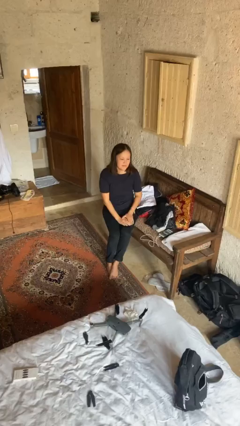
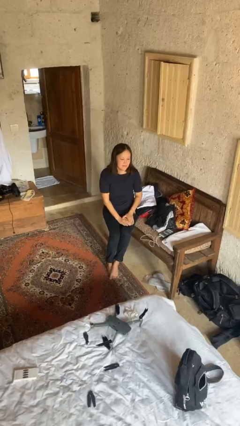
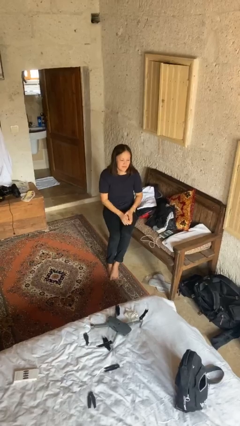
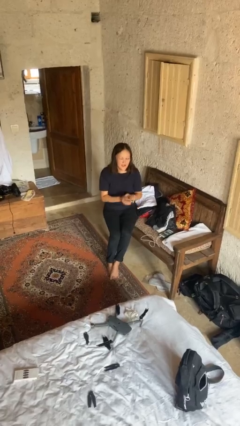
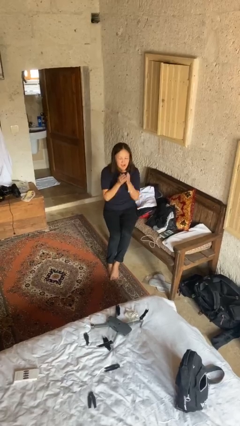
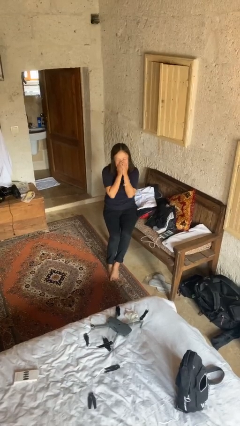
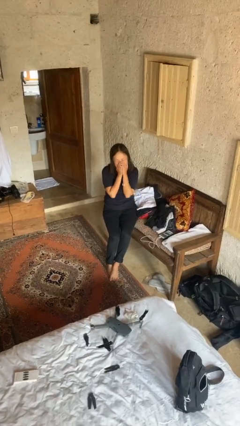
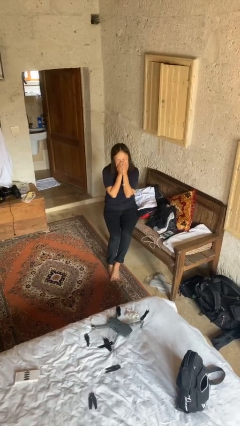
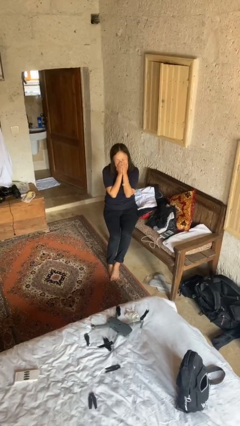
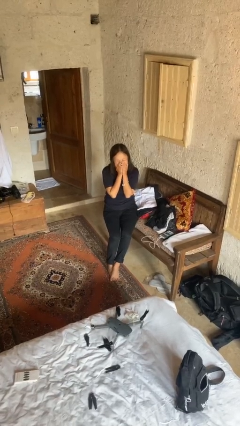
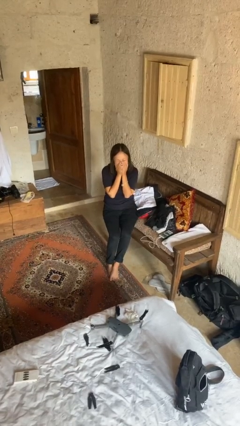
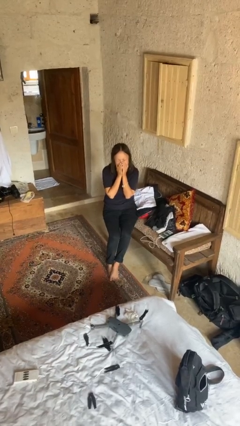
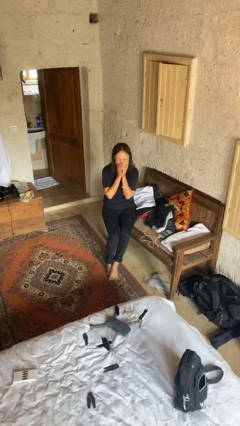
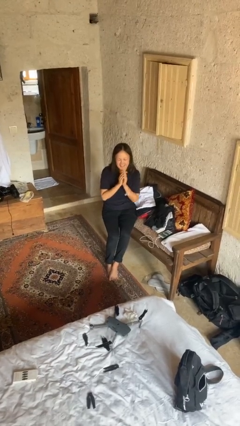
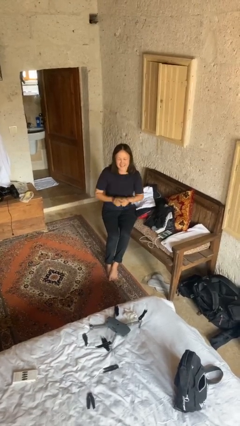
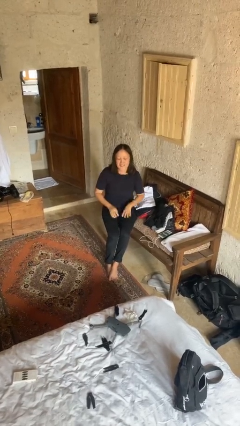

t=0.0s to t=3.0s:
person yawns

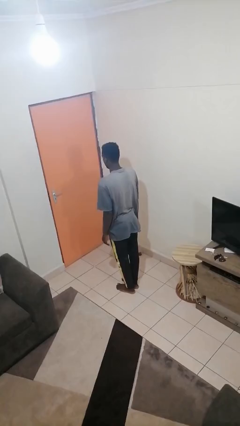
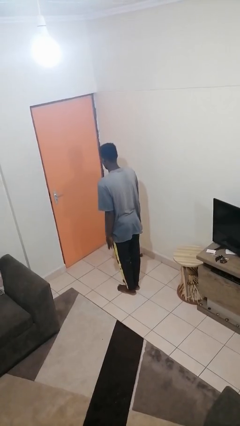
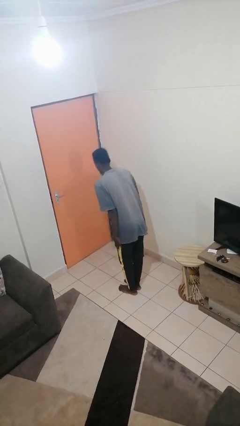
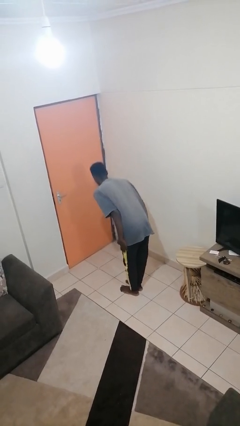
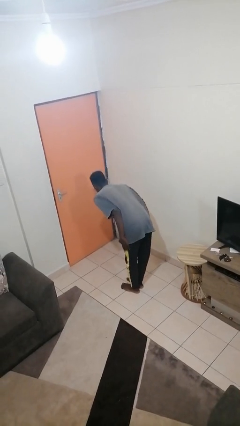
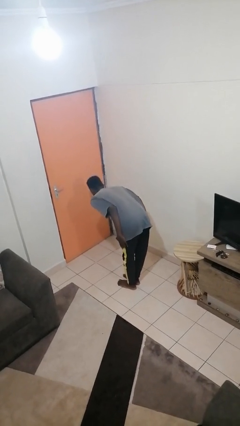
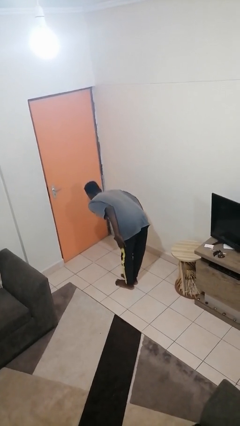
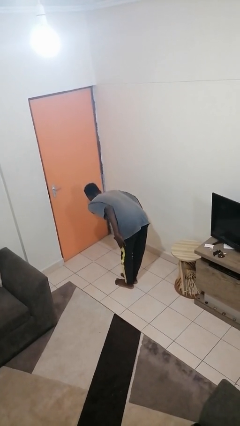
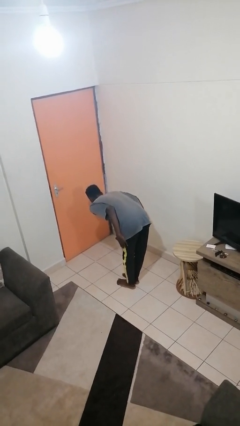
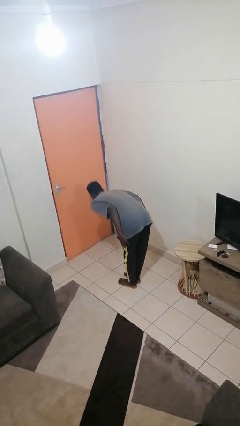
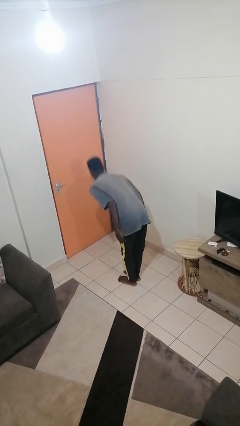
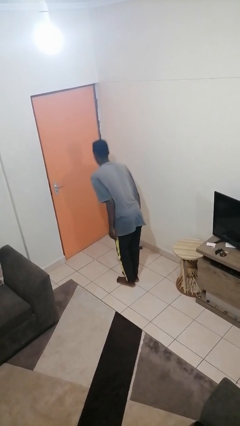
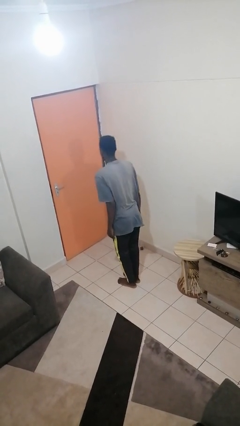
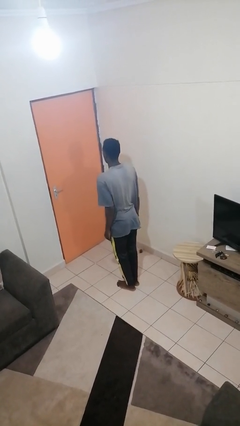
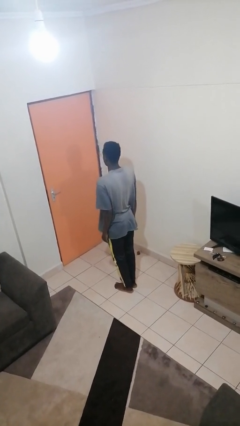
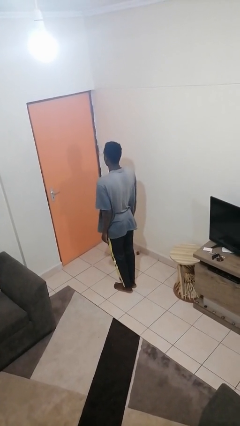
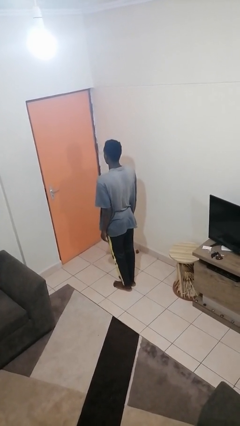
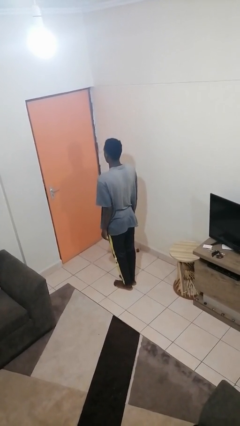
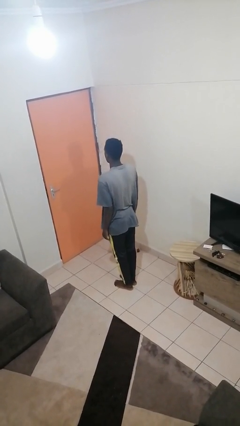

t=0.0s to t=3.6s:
person bows

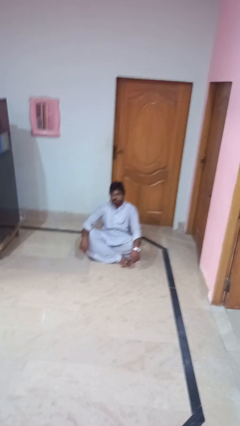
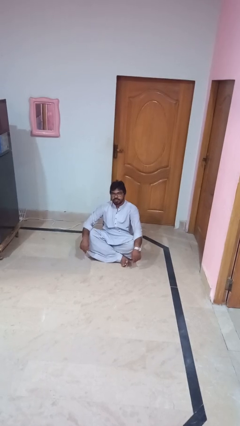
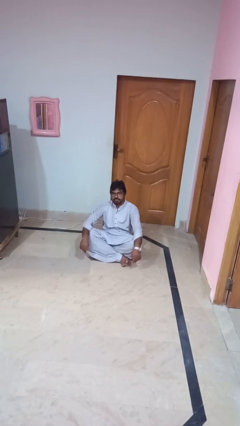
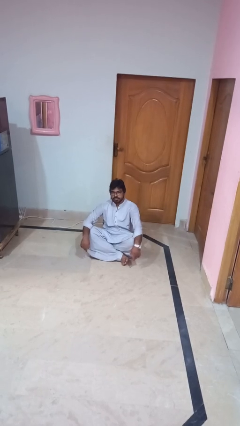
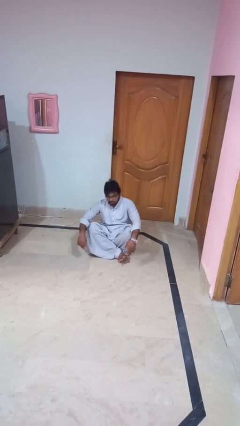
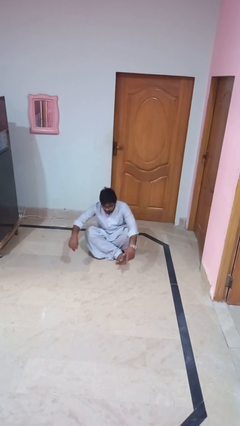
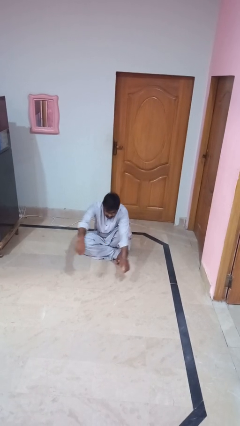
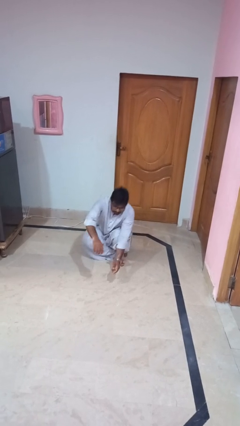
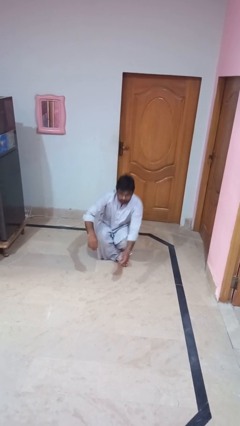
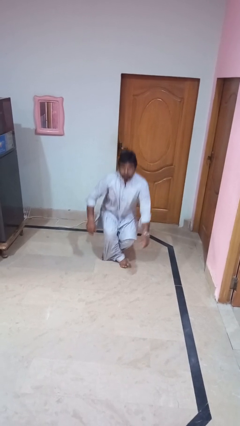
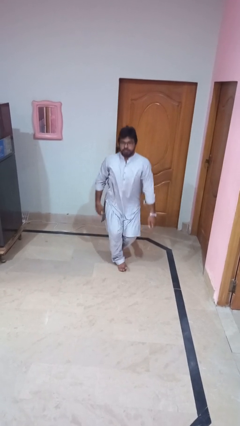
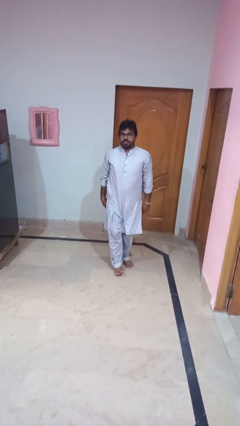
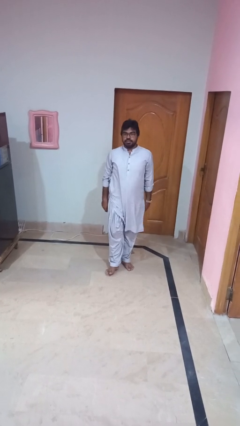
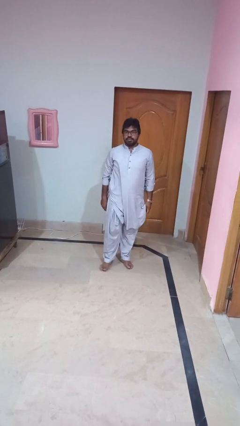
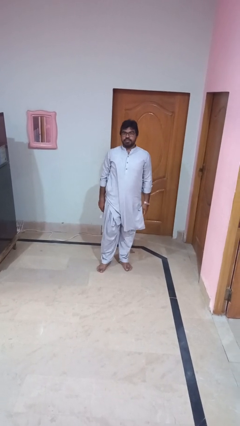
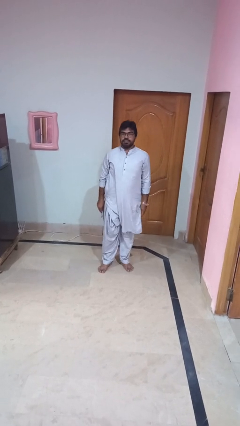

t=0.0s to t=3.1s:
person stands up from floor

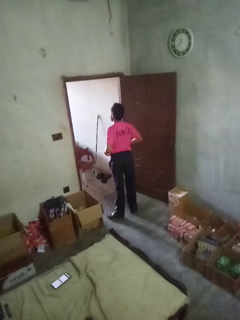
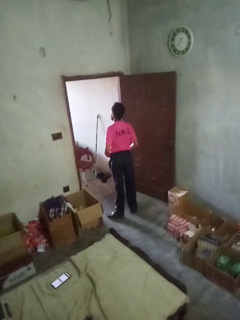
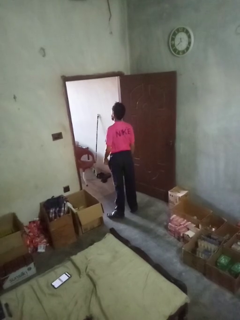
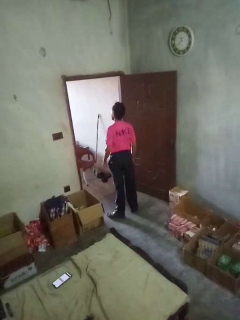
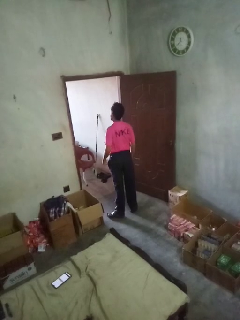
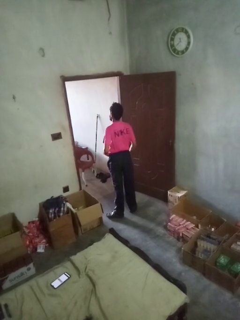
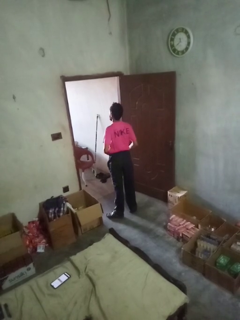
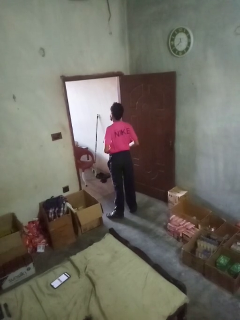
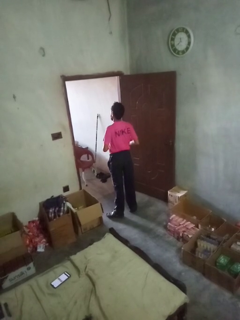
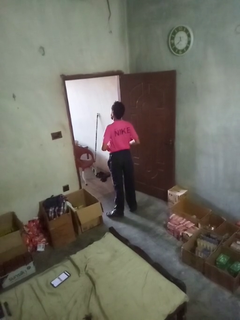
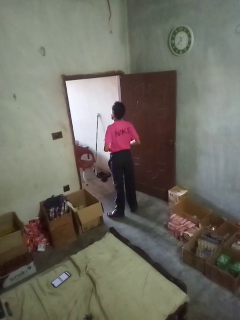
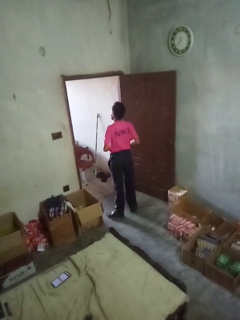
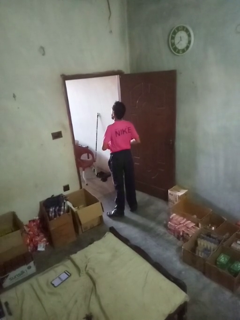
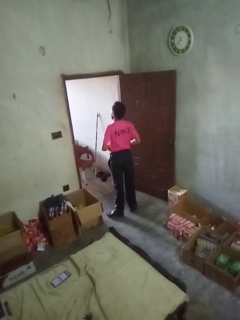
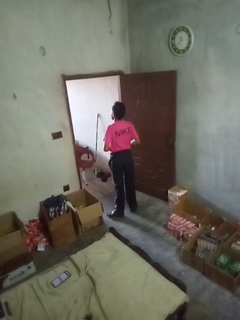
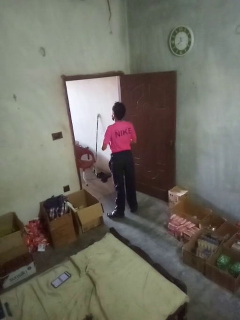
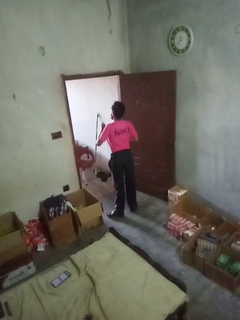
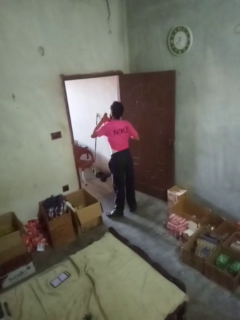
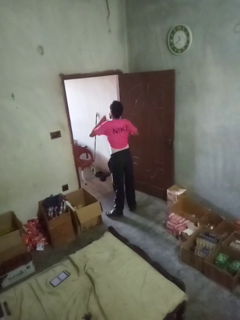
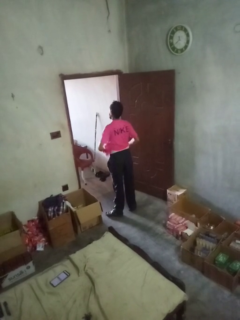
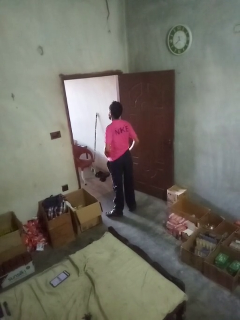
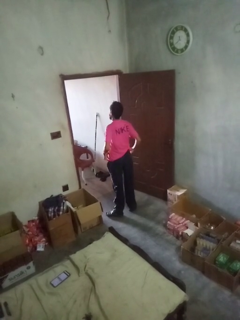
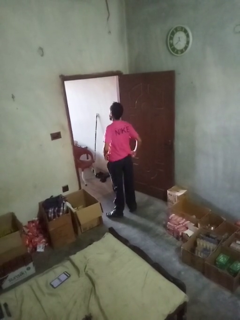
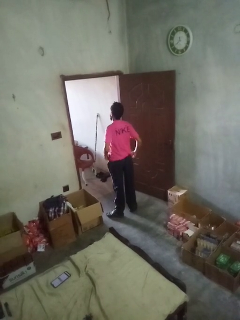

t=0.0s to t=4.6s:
person untucks shirt

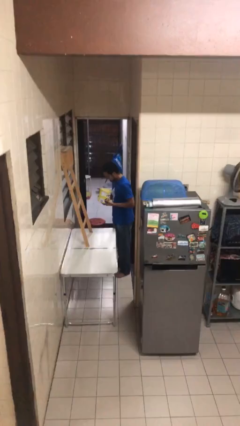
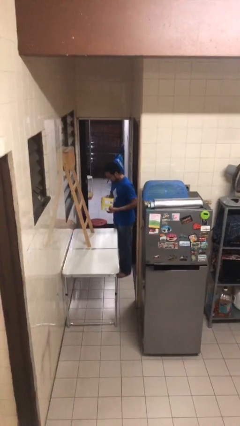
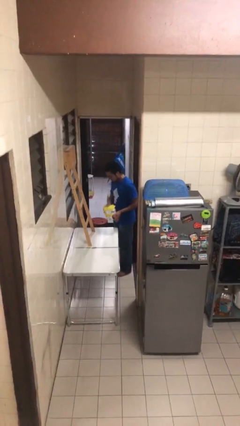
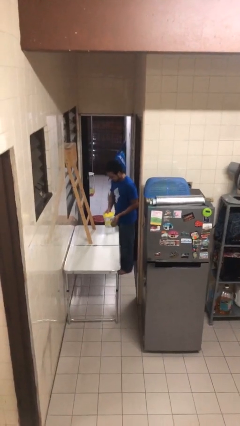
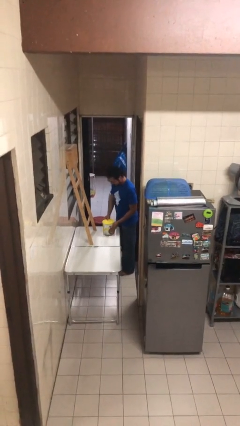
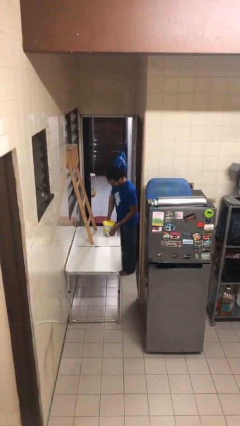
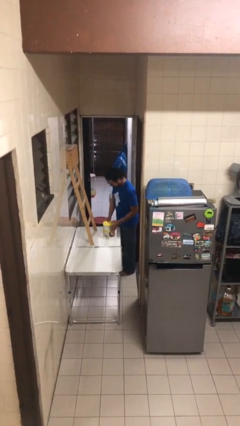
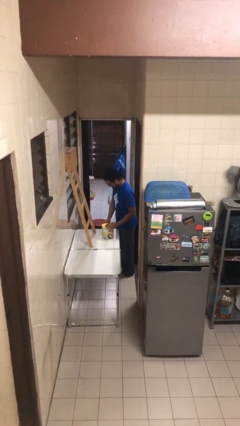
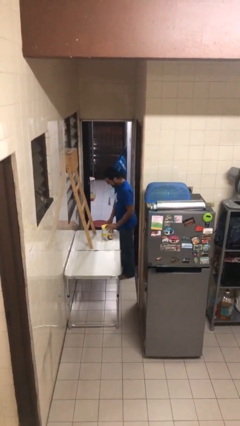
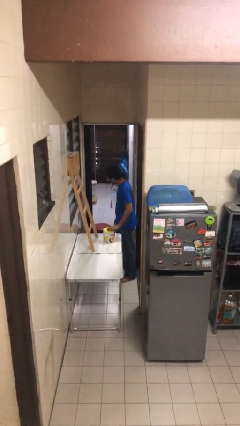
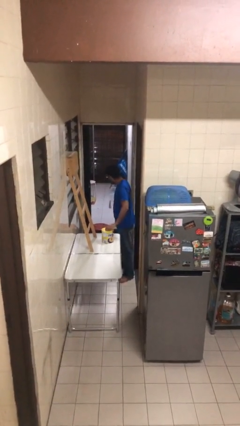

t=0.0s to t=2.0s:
person puts down object on table

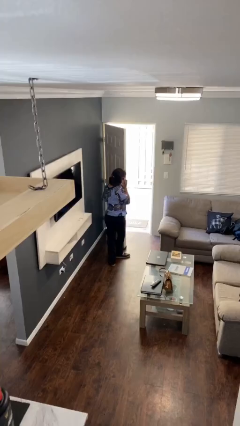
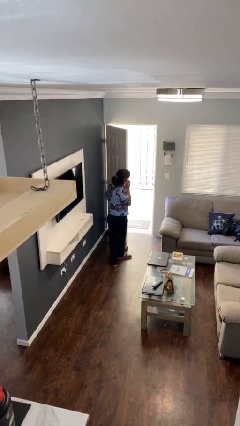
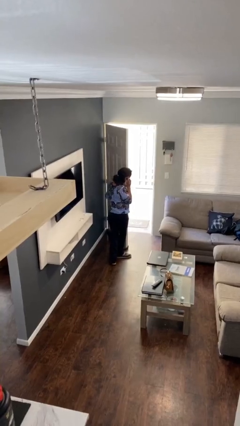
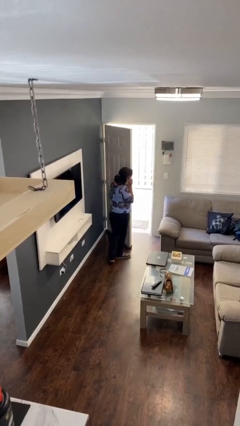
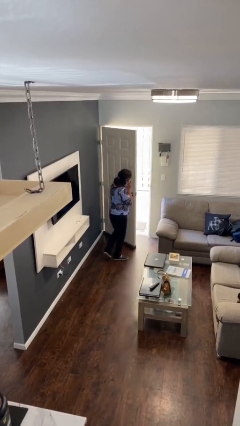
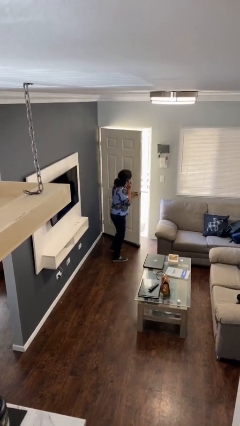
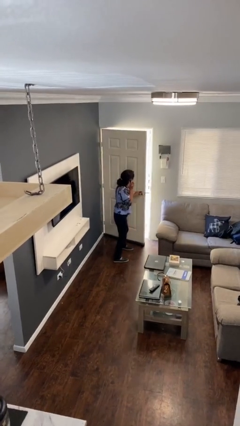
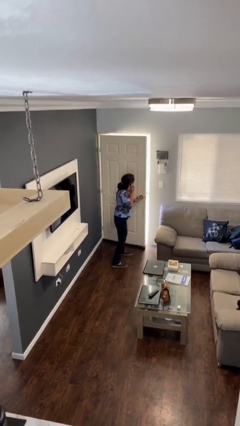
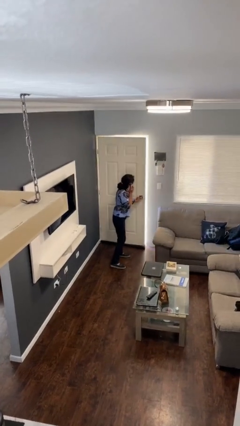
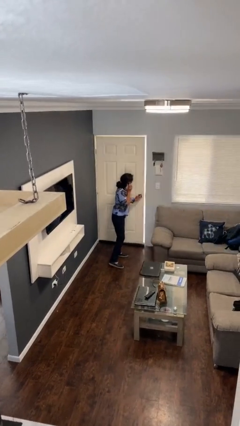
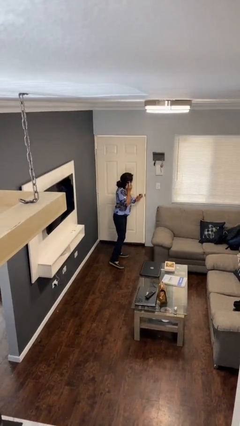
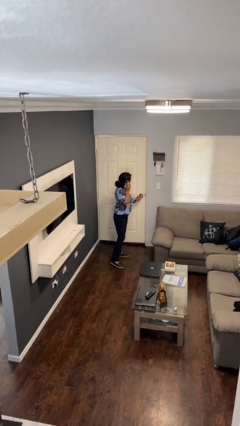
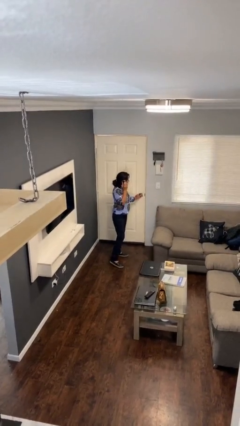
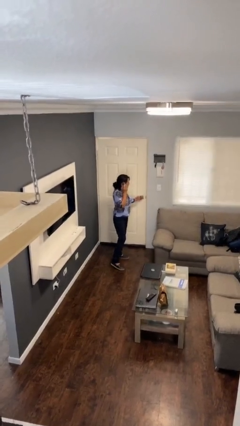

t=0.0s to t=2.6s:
person closes facility door
